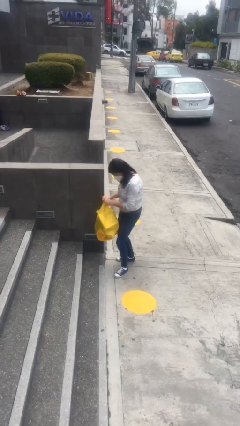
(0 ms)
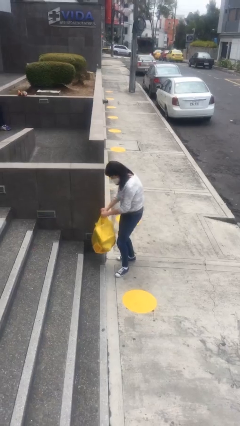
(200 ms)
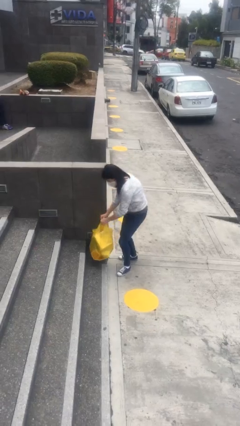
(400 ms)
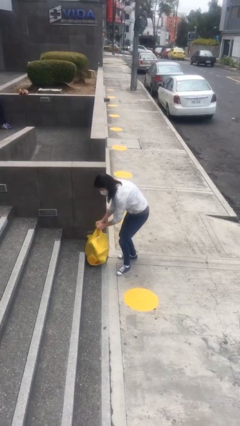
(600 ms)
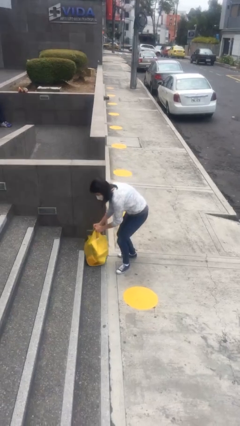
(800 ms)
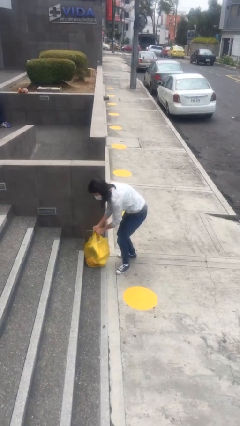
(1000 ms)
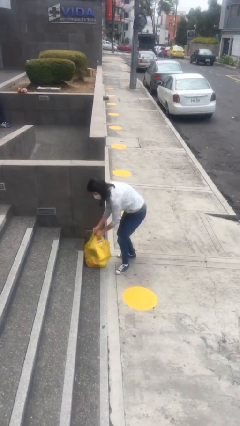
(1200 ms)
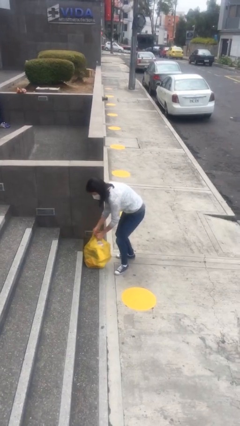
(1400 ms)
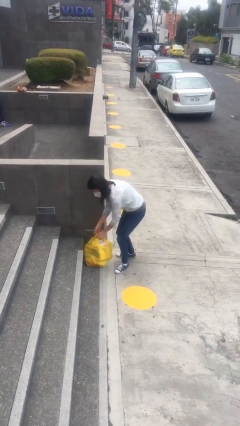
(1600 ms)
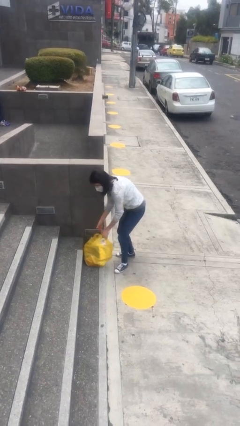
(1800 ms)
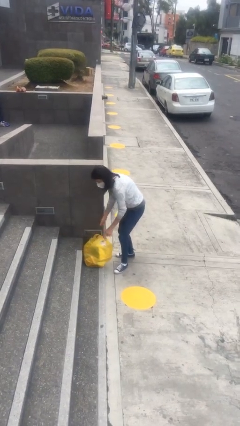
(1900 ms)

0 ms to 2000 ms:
person puts down object on floor

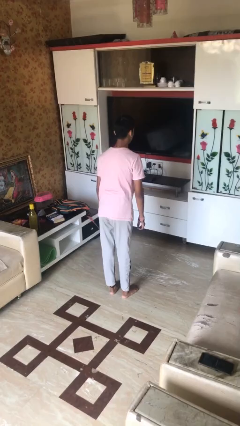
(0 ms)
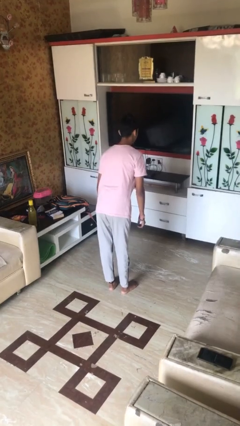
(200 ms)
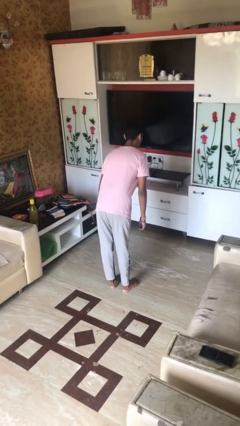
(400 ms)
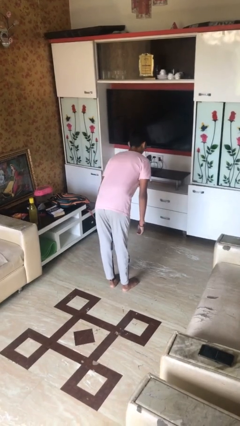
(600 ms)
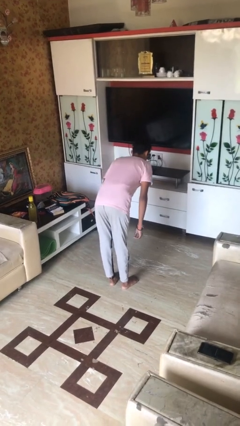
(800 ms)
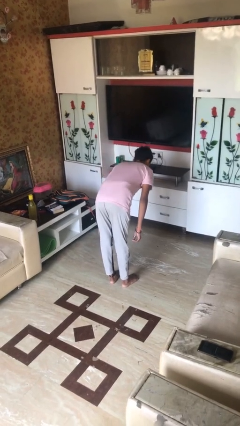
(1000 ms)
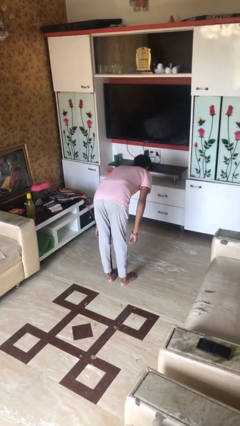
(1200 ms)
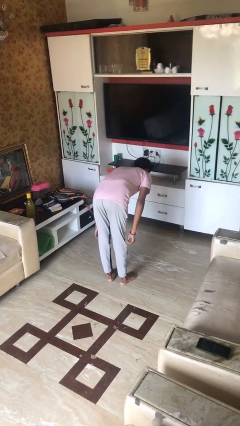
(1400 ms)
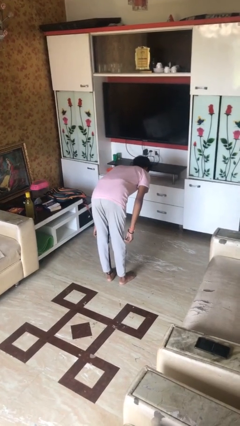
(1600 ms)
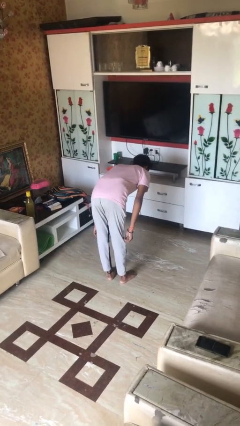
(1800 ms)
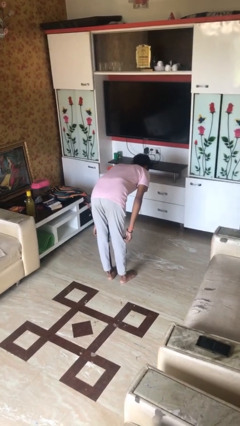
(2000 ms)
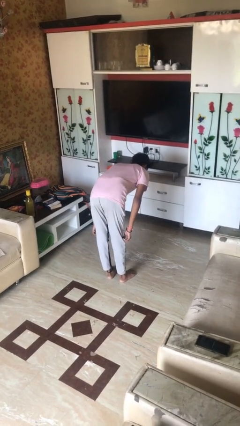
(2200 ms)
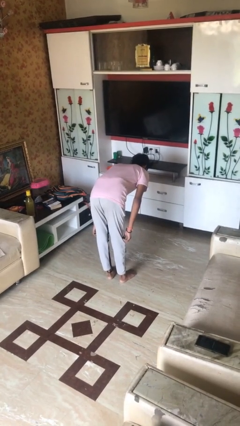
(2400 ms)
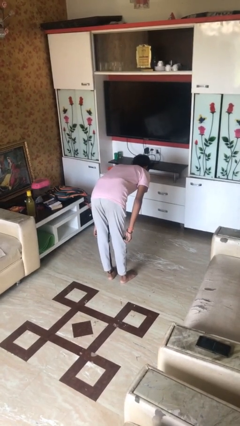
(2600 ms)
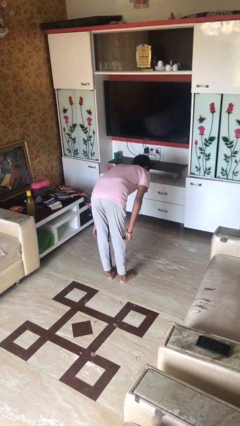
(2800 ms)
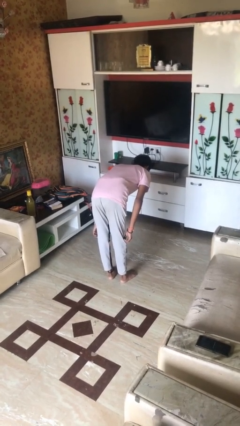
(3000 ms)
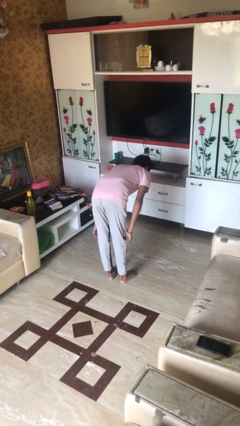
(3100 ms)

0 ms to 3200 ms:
person bows

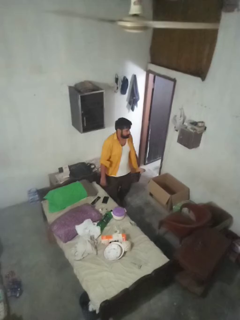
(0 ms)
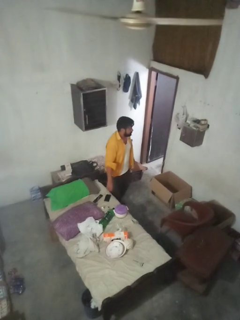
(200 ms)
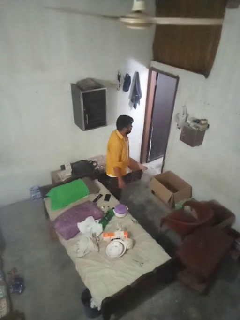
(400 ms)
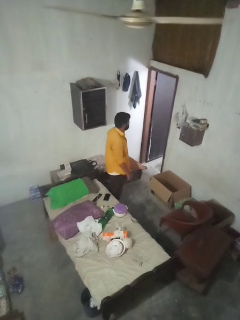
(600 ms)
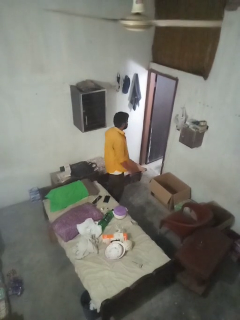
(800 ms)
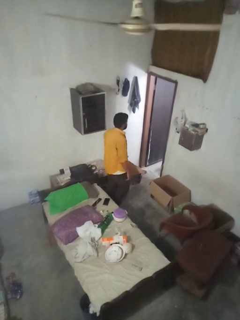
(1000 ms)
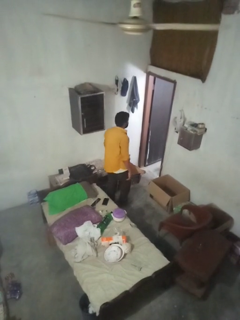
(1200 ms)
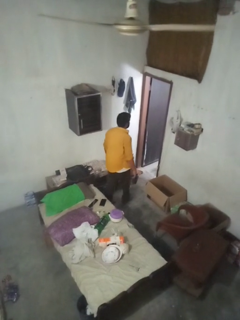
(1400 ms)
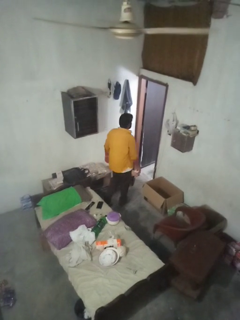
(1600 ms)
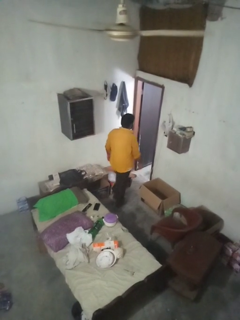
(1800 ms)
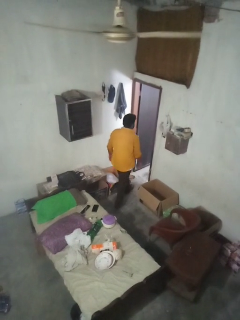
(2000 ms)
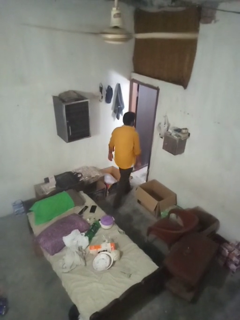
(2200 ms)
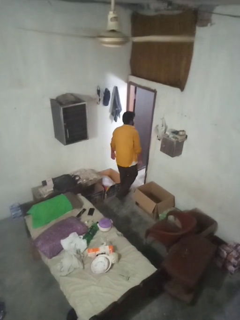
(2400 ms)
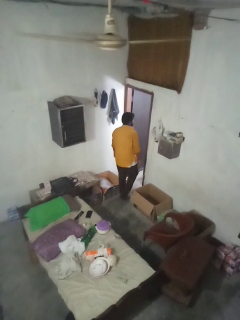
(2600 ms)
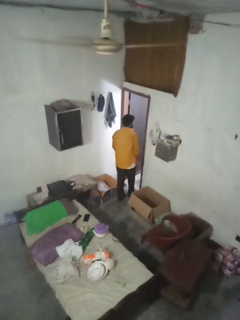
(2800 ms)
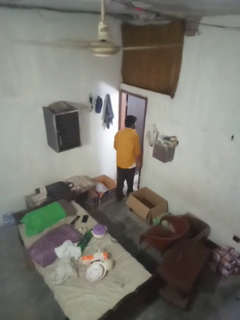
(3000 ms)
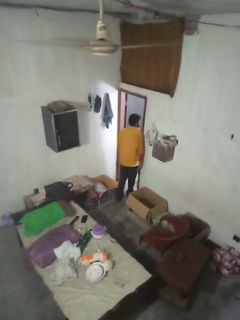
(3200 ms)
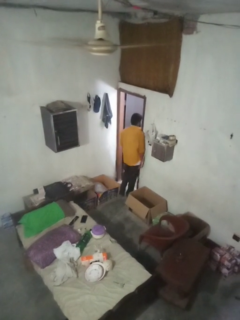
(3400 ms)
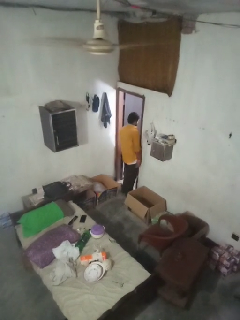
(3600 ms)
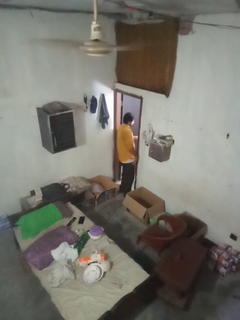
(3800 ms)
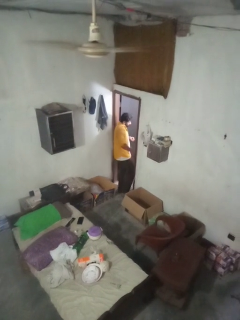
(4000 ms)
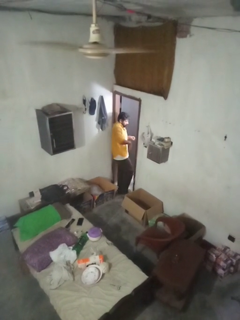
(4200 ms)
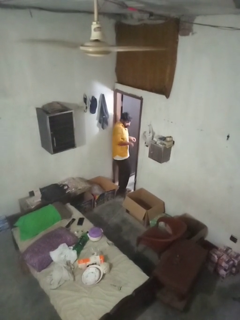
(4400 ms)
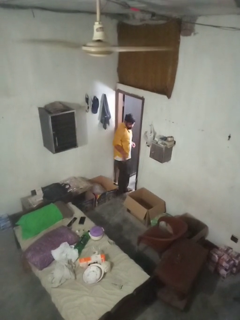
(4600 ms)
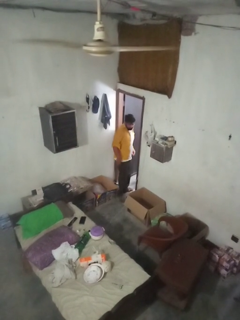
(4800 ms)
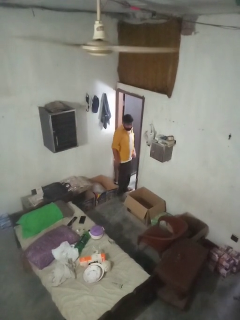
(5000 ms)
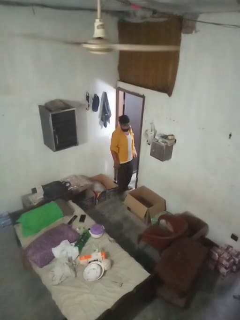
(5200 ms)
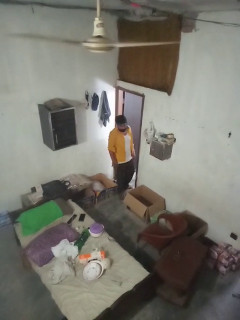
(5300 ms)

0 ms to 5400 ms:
person bumps into wall

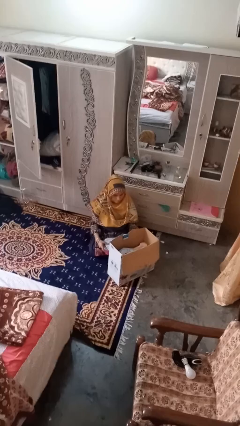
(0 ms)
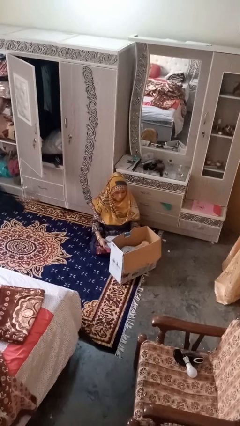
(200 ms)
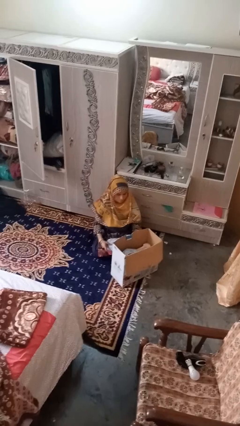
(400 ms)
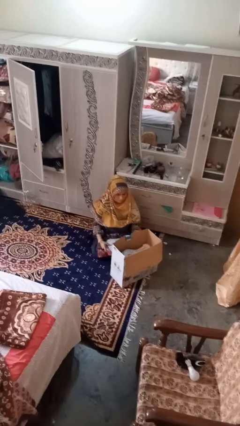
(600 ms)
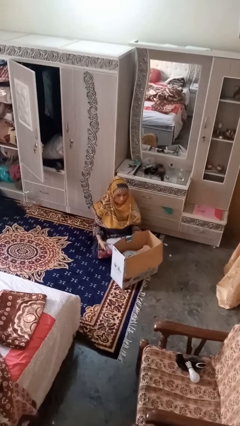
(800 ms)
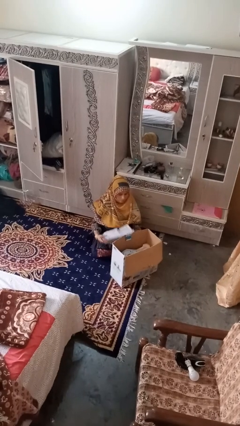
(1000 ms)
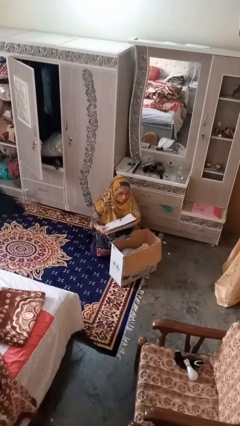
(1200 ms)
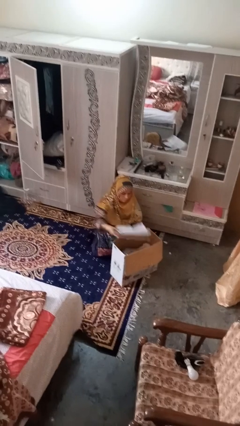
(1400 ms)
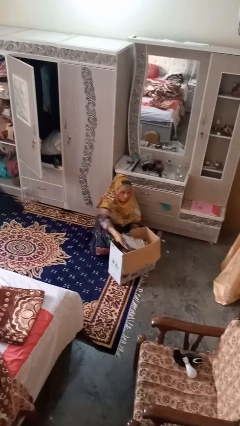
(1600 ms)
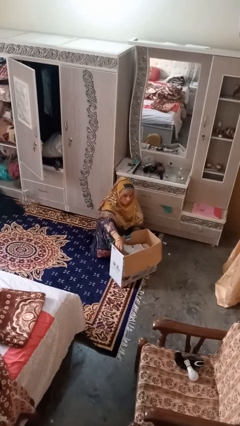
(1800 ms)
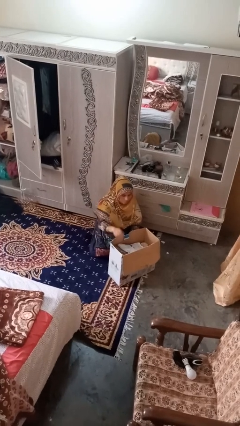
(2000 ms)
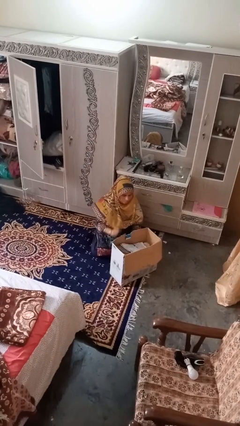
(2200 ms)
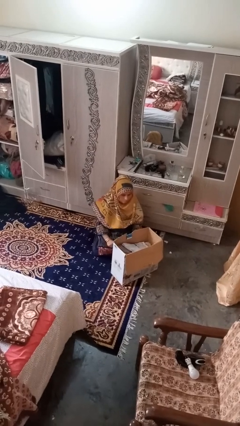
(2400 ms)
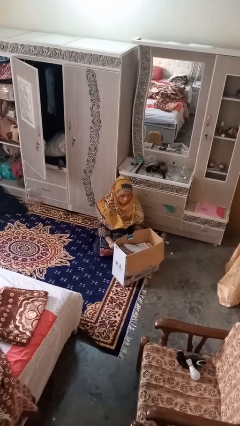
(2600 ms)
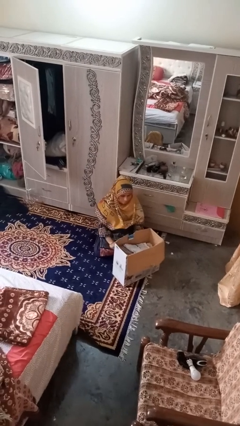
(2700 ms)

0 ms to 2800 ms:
person puts object into box

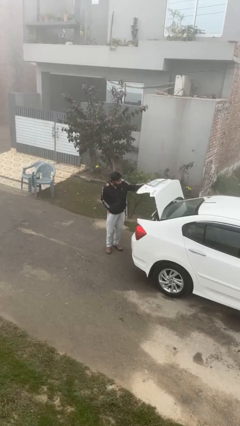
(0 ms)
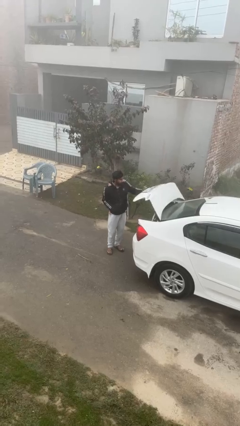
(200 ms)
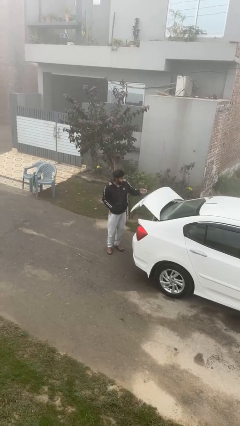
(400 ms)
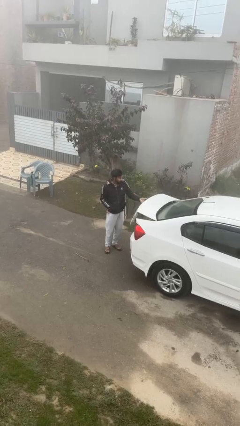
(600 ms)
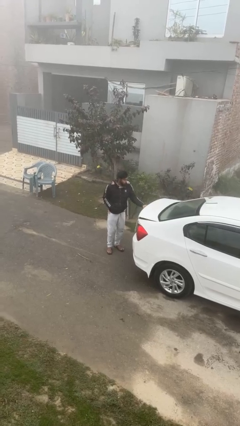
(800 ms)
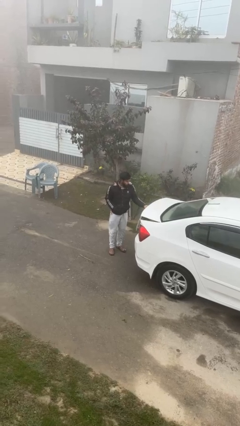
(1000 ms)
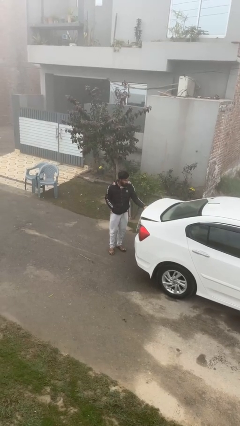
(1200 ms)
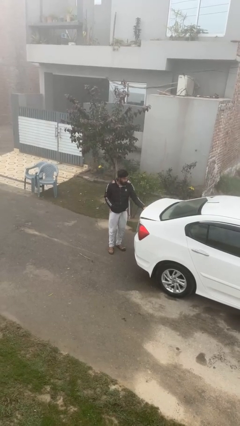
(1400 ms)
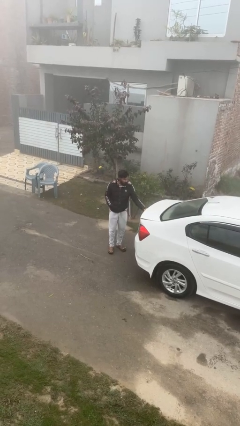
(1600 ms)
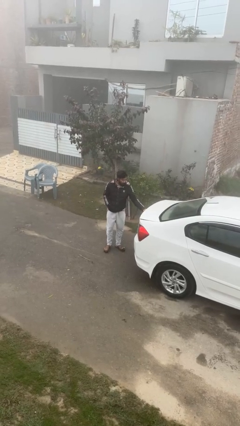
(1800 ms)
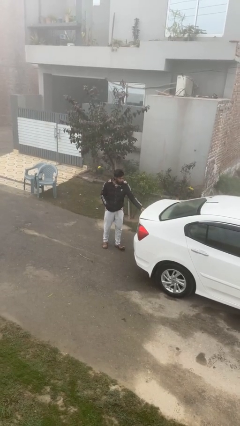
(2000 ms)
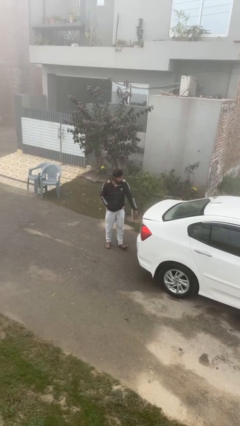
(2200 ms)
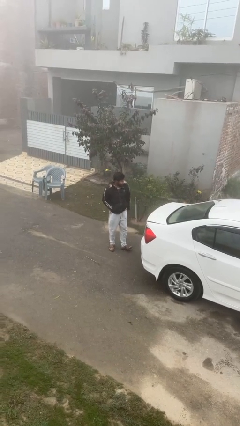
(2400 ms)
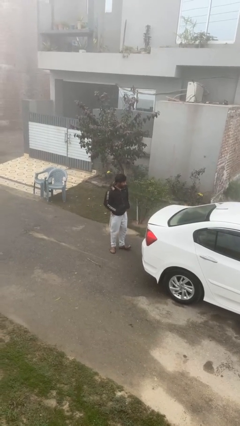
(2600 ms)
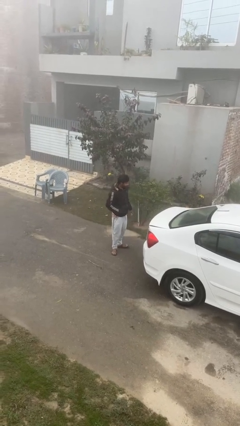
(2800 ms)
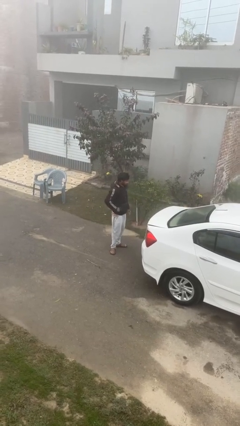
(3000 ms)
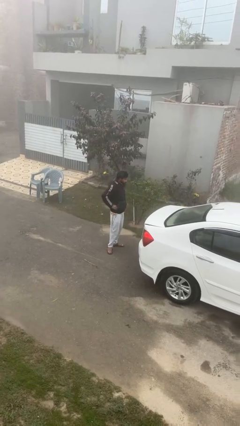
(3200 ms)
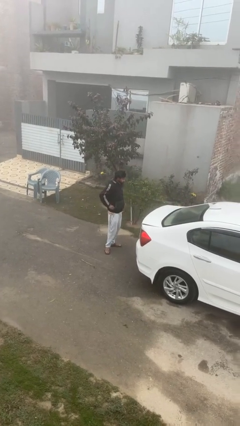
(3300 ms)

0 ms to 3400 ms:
person closes car trunk

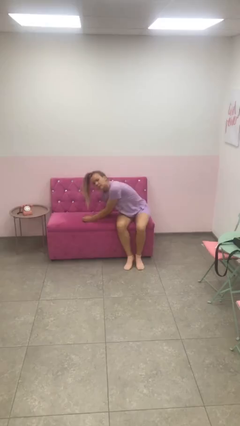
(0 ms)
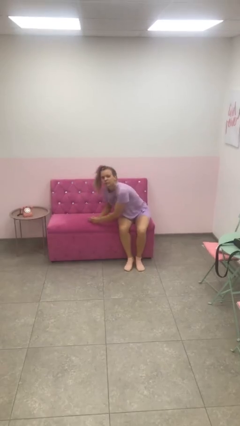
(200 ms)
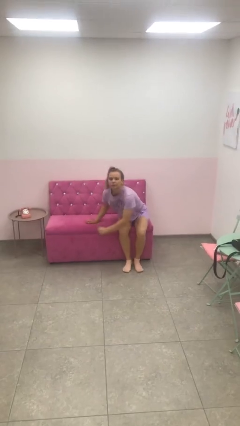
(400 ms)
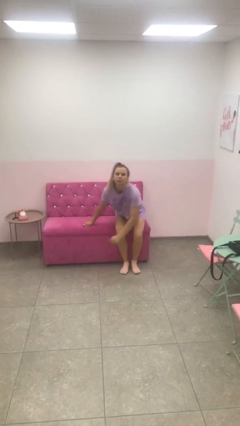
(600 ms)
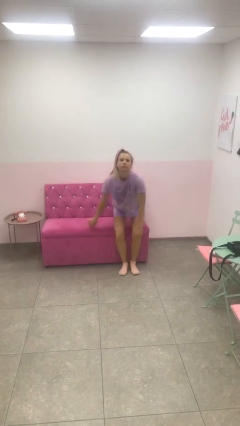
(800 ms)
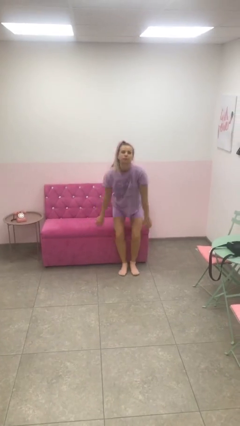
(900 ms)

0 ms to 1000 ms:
person stands up

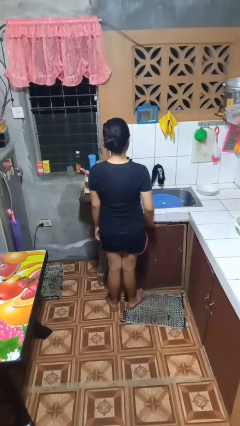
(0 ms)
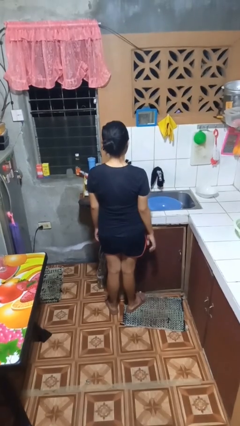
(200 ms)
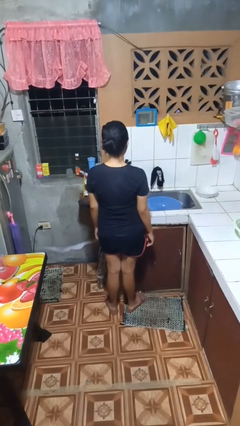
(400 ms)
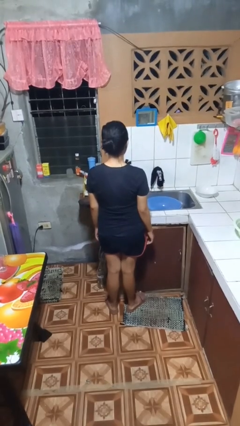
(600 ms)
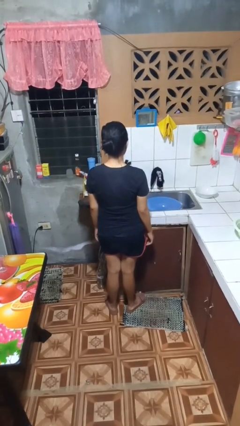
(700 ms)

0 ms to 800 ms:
person turns off faucet
